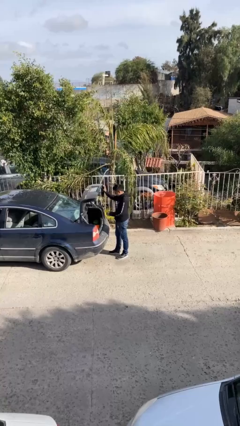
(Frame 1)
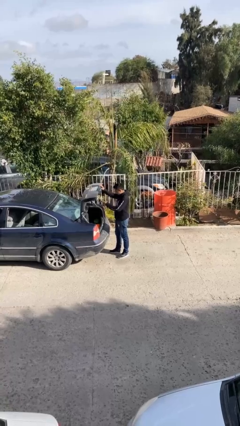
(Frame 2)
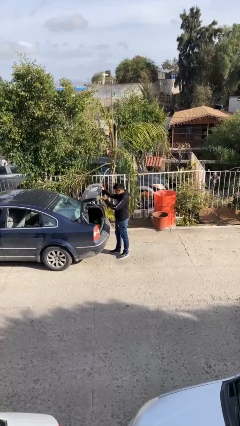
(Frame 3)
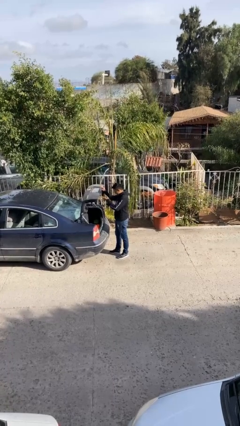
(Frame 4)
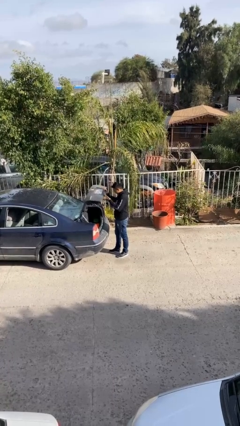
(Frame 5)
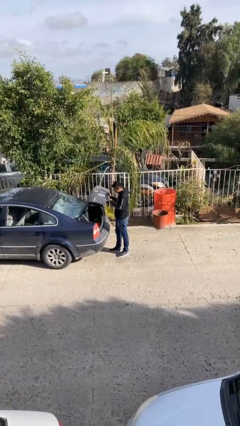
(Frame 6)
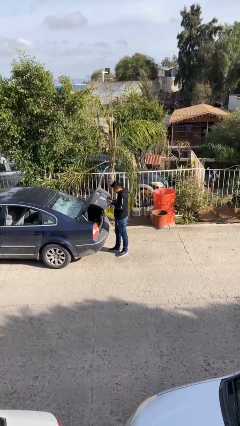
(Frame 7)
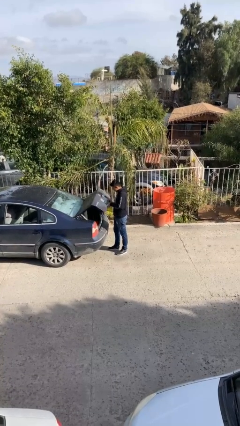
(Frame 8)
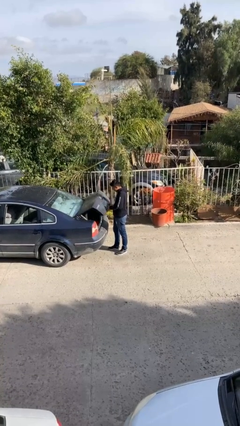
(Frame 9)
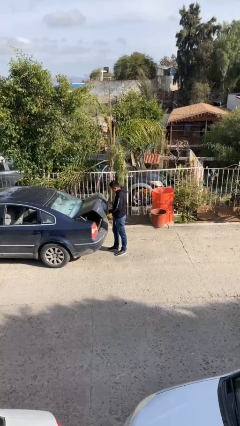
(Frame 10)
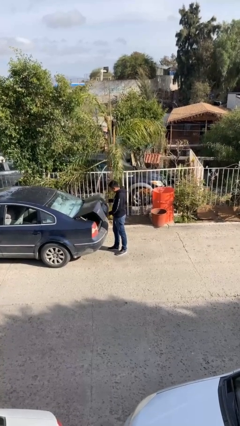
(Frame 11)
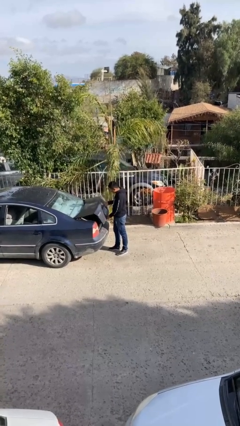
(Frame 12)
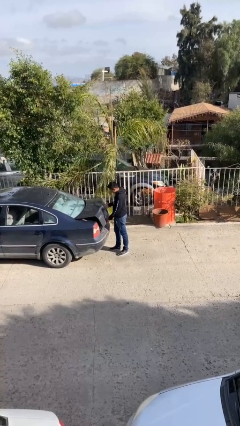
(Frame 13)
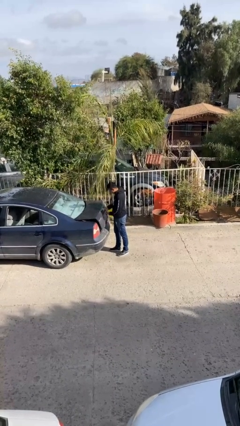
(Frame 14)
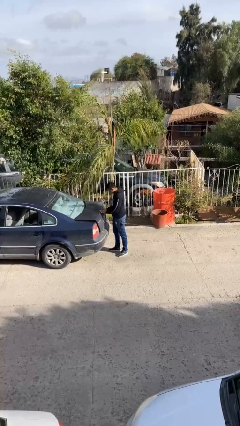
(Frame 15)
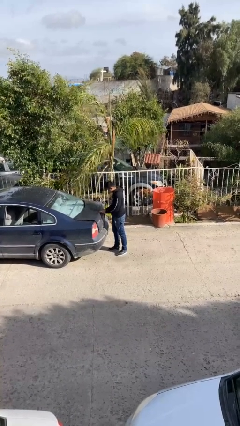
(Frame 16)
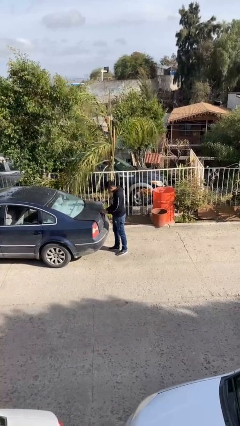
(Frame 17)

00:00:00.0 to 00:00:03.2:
person closes car trunk

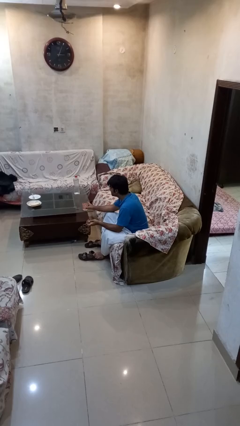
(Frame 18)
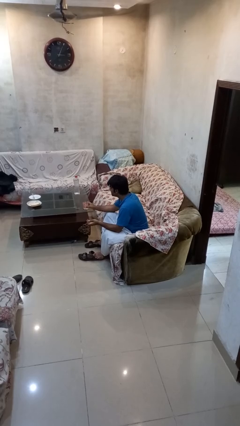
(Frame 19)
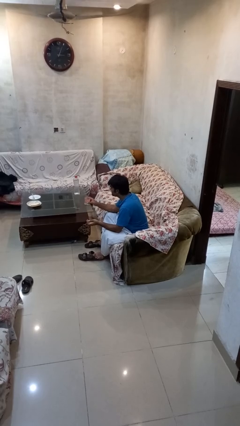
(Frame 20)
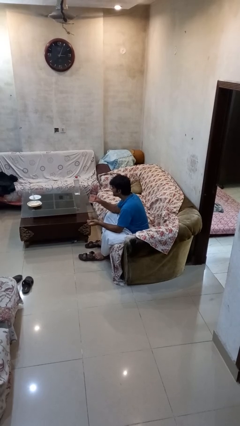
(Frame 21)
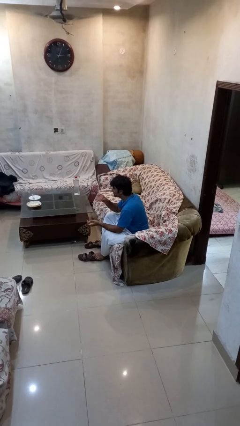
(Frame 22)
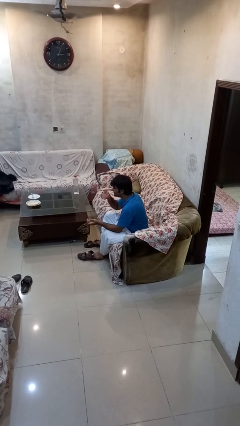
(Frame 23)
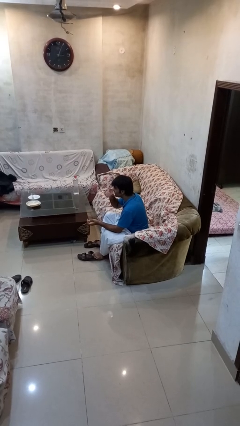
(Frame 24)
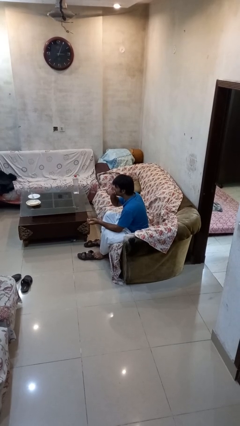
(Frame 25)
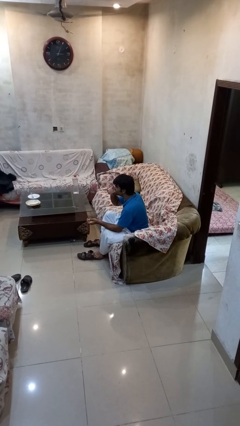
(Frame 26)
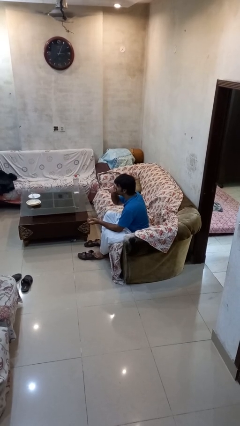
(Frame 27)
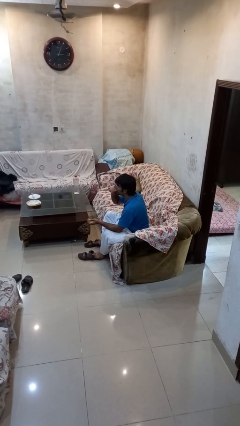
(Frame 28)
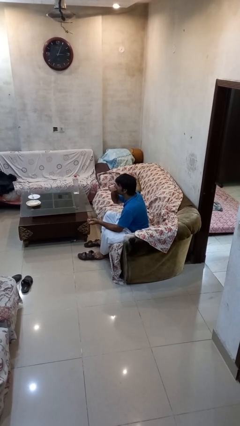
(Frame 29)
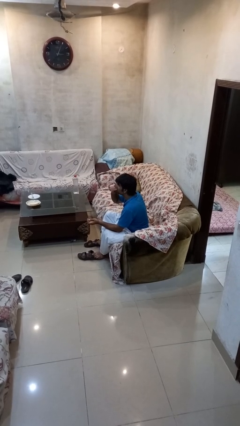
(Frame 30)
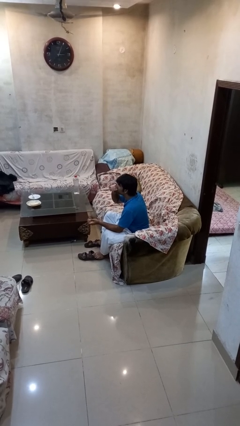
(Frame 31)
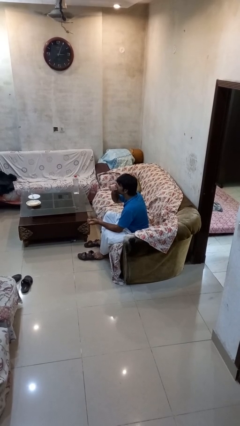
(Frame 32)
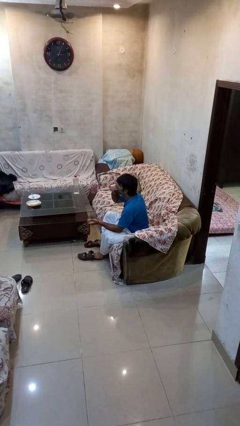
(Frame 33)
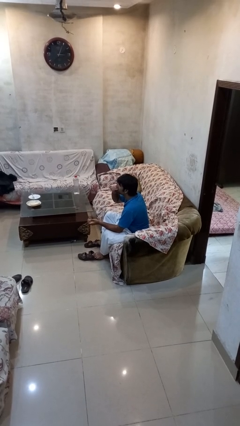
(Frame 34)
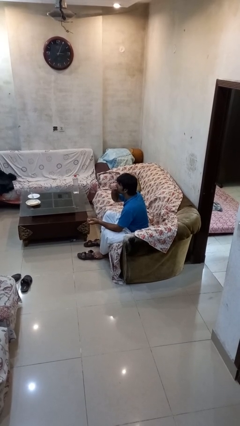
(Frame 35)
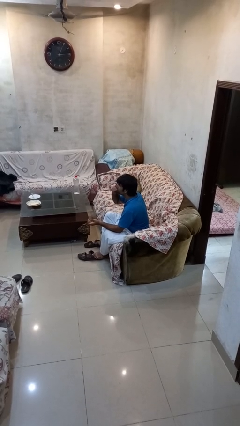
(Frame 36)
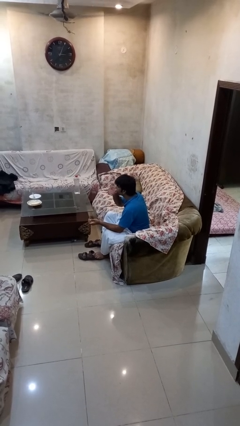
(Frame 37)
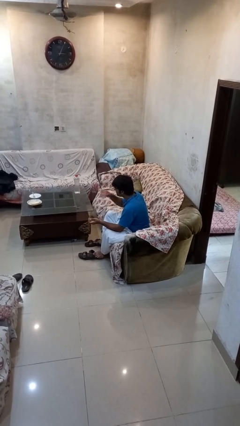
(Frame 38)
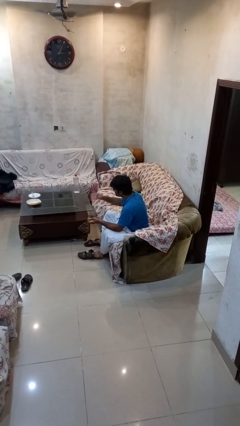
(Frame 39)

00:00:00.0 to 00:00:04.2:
person drinks from cup

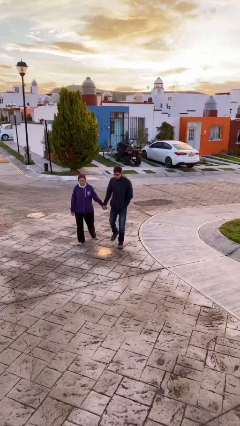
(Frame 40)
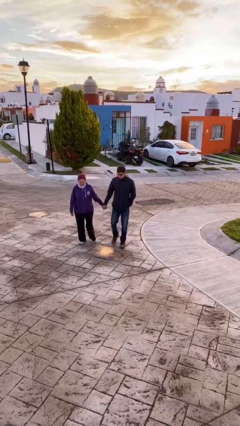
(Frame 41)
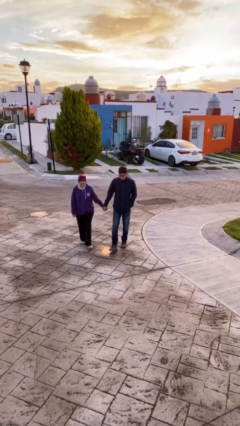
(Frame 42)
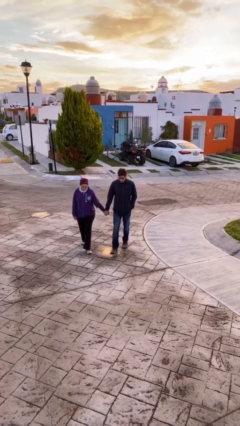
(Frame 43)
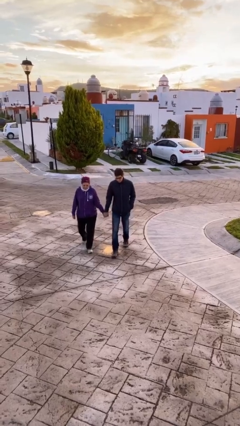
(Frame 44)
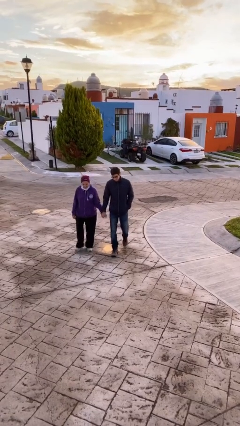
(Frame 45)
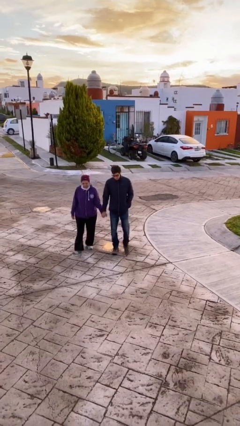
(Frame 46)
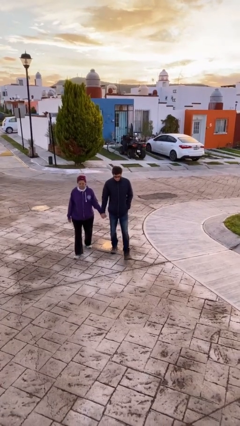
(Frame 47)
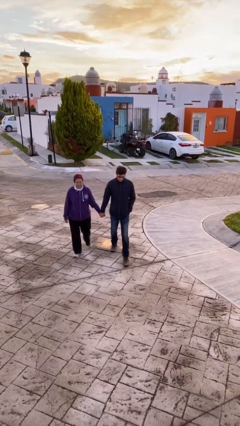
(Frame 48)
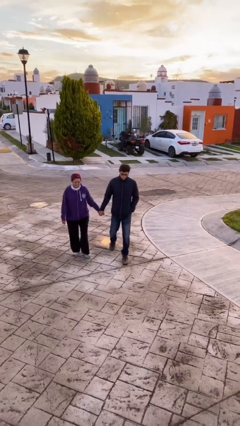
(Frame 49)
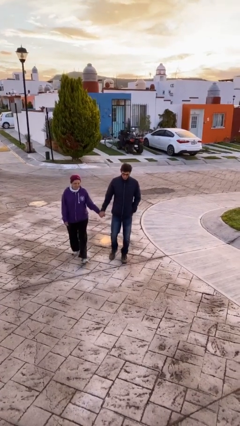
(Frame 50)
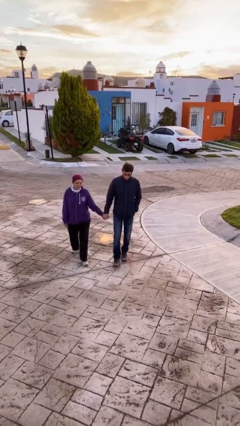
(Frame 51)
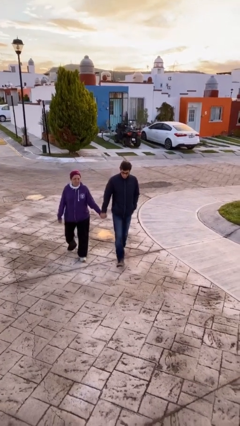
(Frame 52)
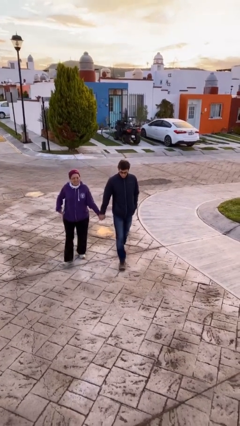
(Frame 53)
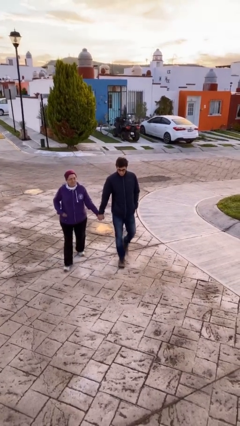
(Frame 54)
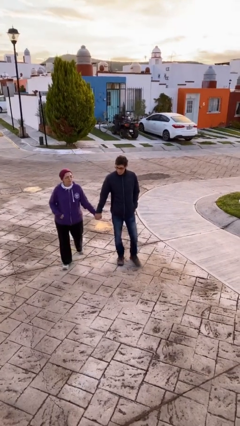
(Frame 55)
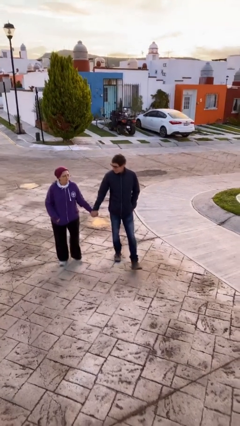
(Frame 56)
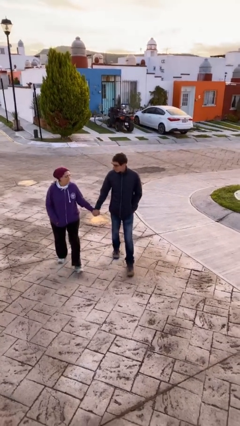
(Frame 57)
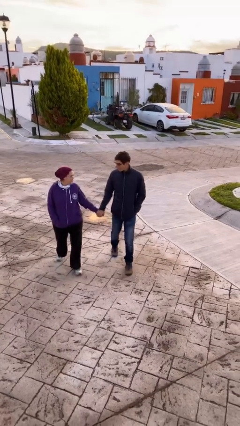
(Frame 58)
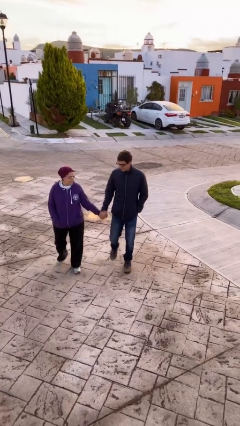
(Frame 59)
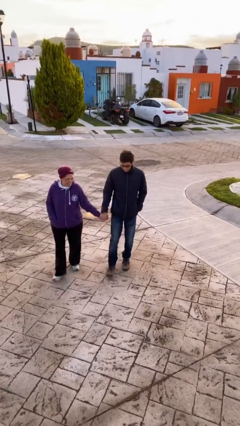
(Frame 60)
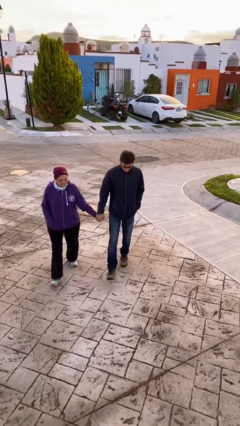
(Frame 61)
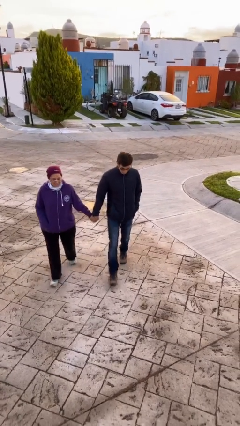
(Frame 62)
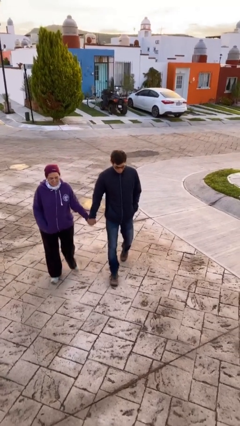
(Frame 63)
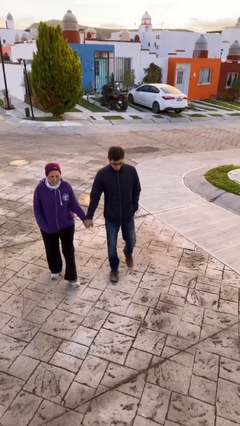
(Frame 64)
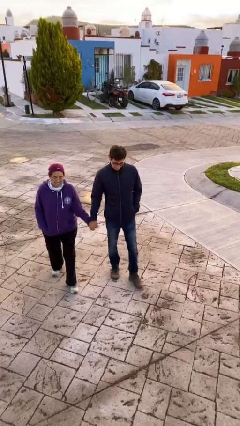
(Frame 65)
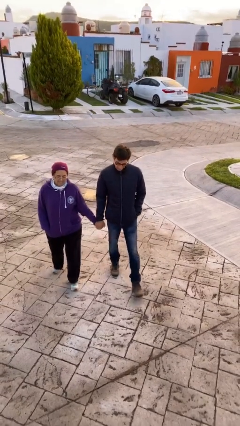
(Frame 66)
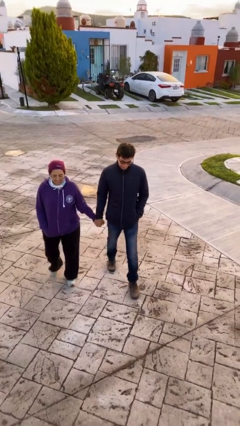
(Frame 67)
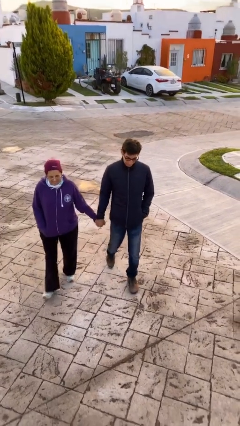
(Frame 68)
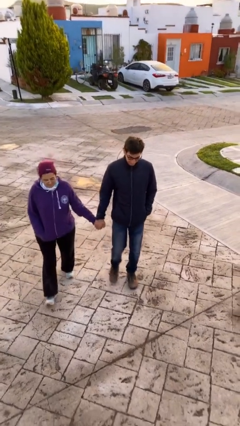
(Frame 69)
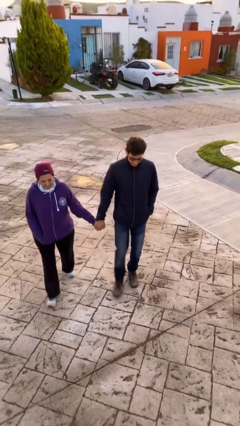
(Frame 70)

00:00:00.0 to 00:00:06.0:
person holds hand

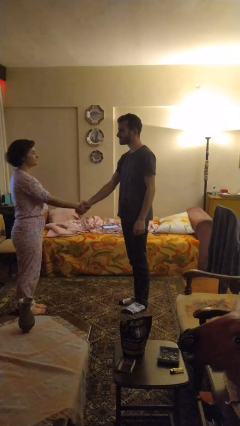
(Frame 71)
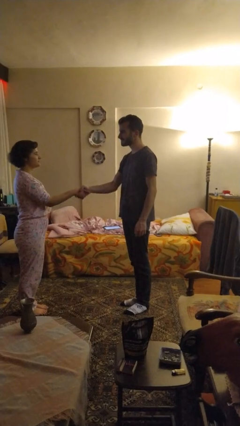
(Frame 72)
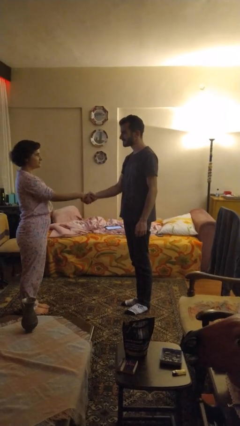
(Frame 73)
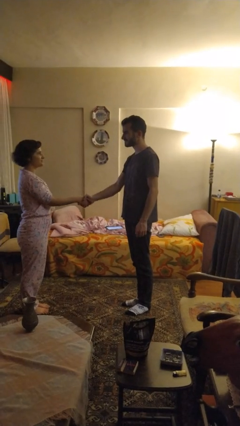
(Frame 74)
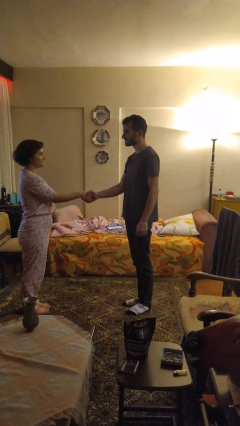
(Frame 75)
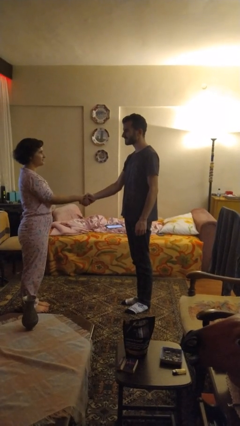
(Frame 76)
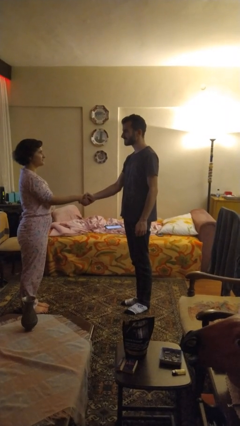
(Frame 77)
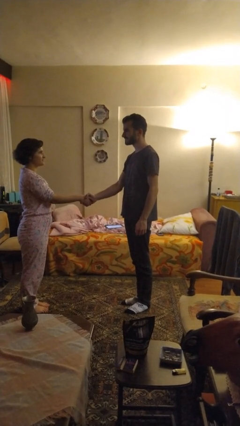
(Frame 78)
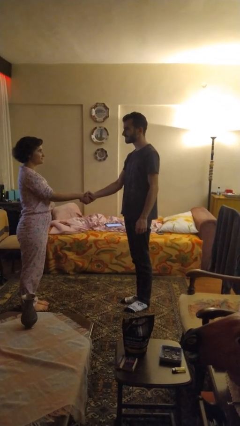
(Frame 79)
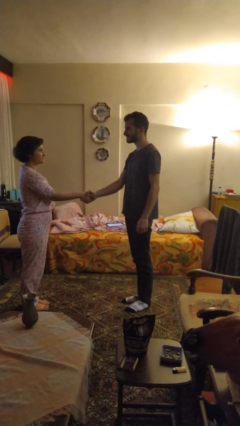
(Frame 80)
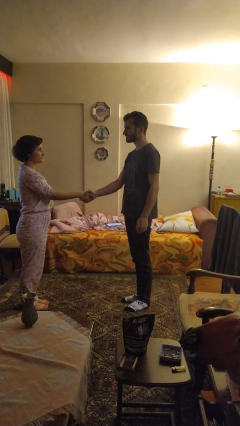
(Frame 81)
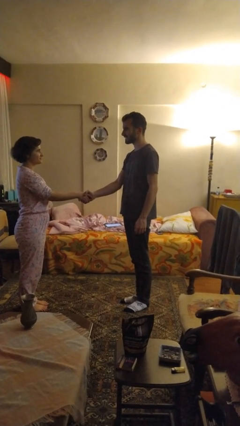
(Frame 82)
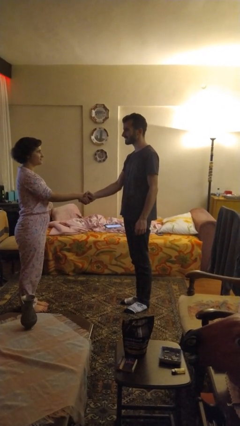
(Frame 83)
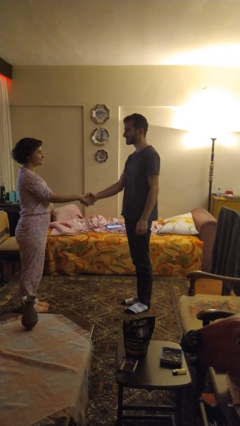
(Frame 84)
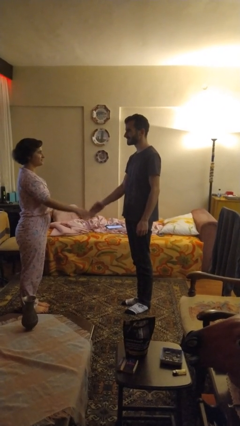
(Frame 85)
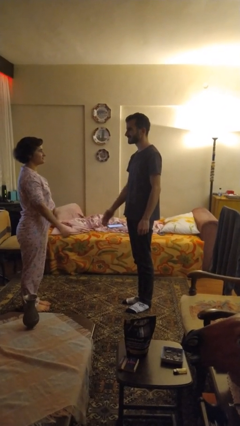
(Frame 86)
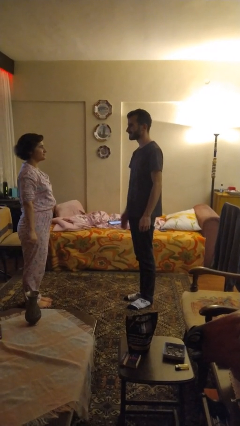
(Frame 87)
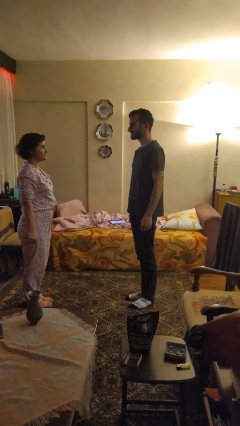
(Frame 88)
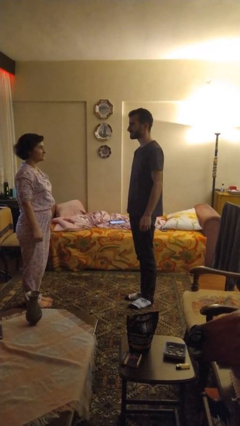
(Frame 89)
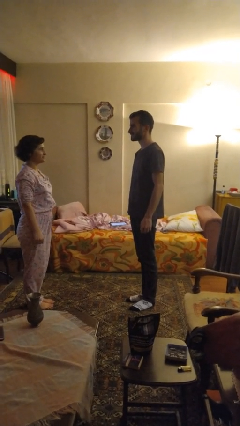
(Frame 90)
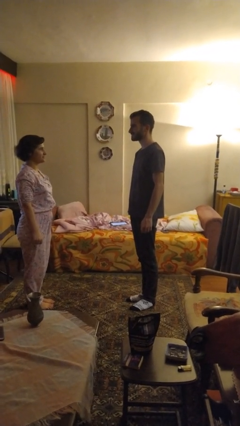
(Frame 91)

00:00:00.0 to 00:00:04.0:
person highfives hand

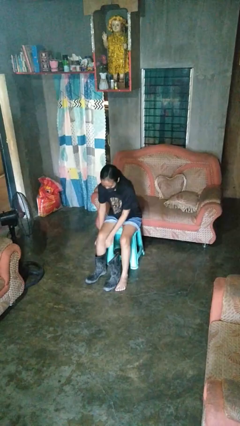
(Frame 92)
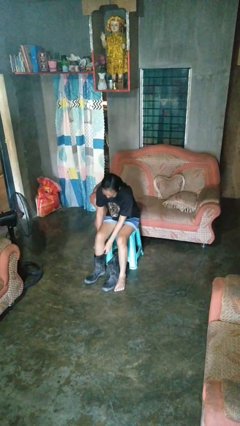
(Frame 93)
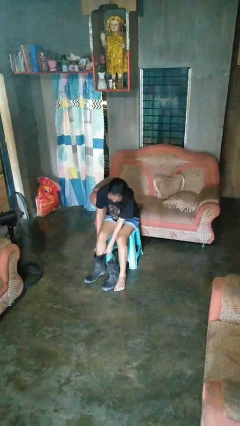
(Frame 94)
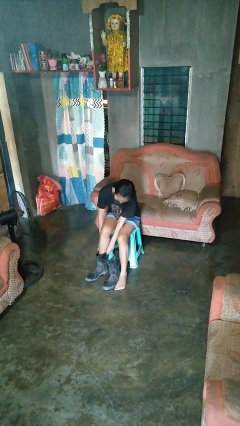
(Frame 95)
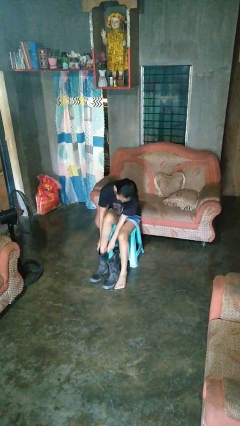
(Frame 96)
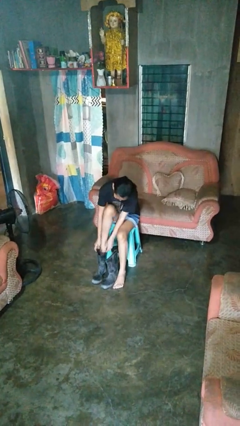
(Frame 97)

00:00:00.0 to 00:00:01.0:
person takes off boots
